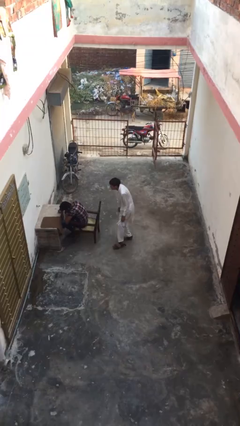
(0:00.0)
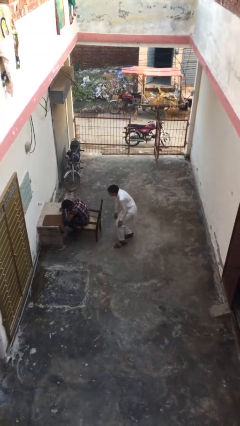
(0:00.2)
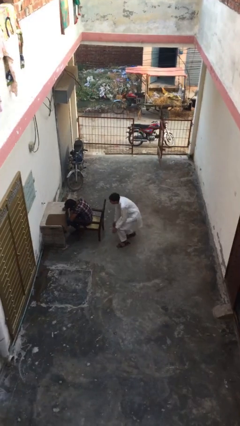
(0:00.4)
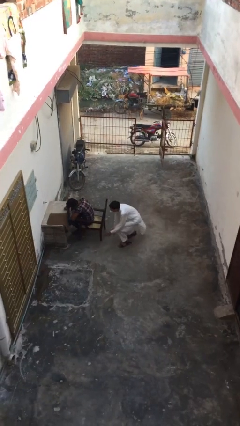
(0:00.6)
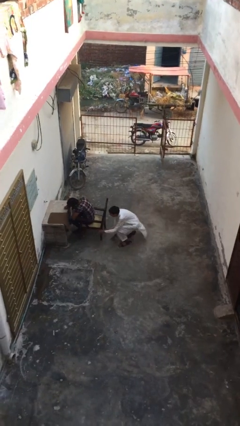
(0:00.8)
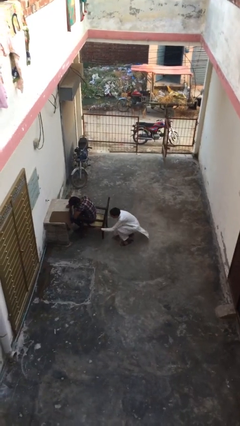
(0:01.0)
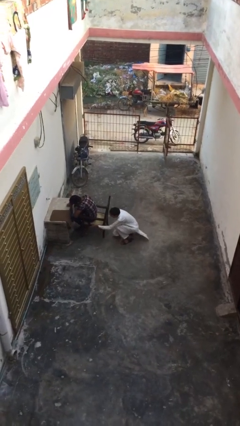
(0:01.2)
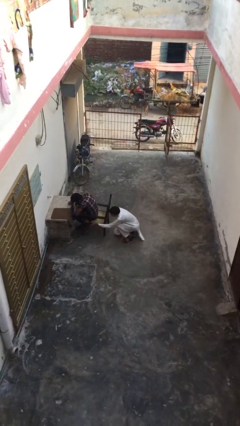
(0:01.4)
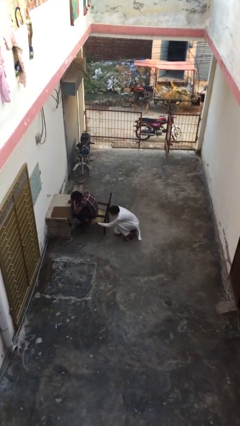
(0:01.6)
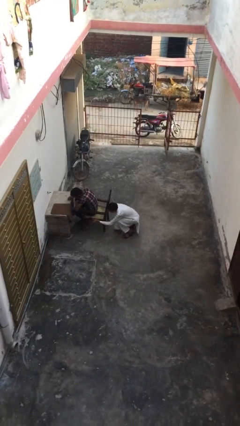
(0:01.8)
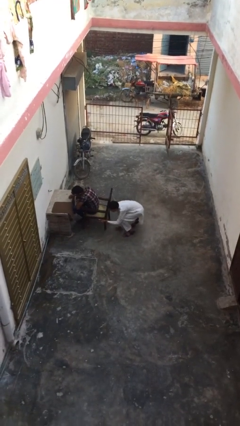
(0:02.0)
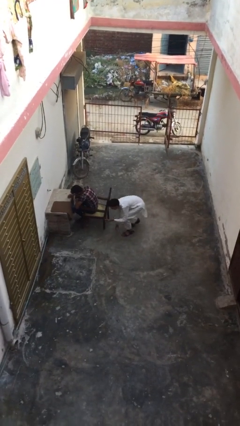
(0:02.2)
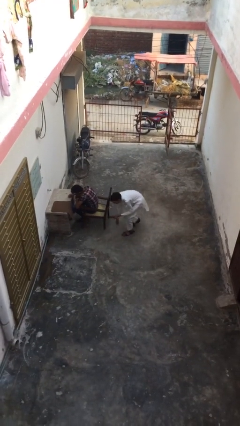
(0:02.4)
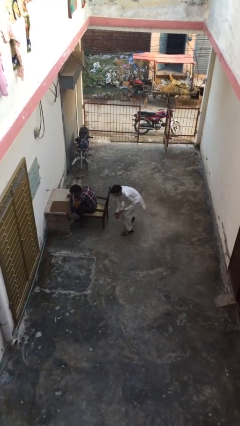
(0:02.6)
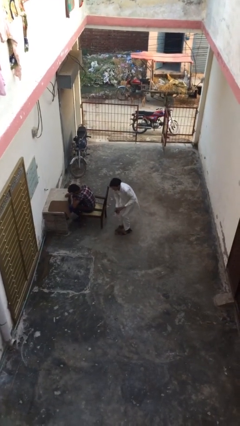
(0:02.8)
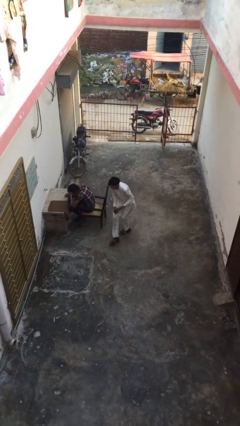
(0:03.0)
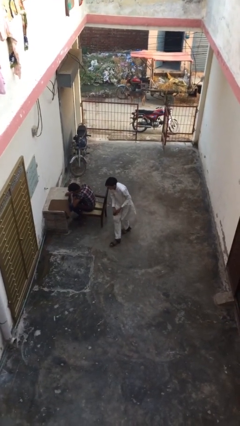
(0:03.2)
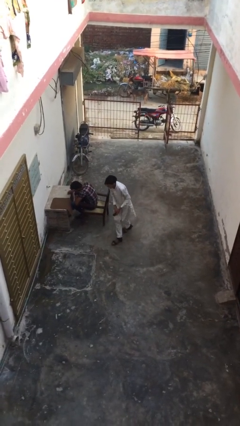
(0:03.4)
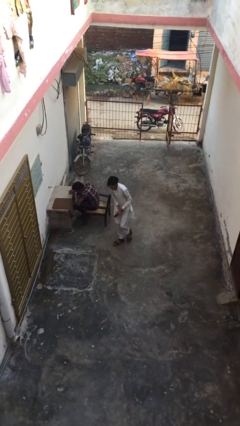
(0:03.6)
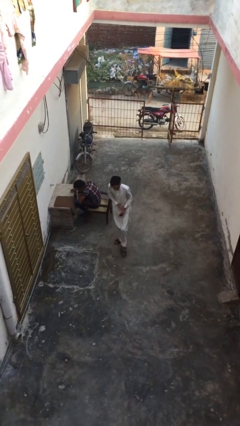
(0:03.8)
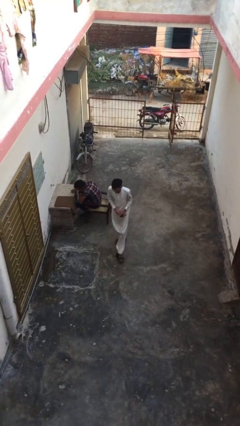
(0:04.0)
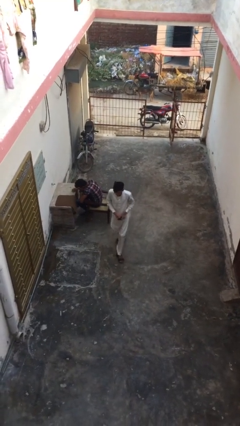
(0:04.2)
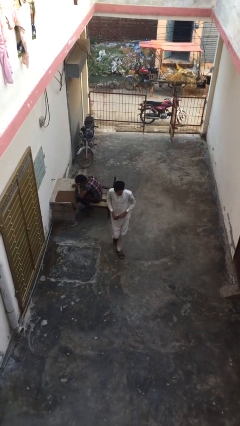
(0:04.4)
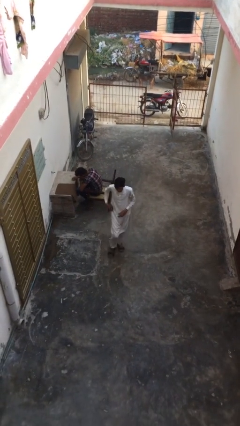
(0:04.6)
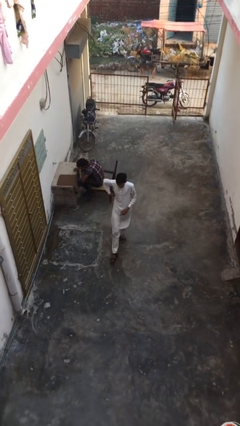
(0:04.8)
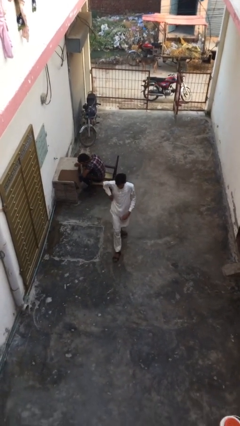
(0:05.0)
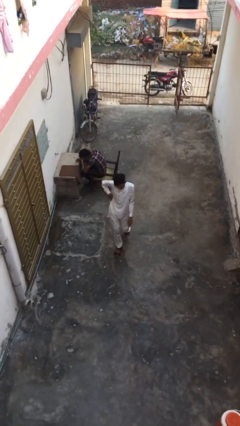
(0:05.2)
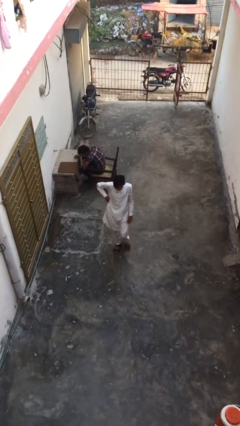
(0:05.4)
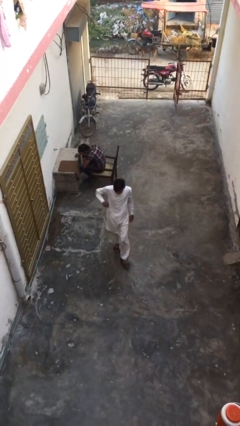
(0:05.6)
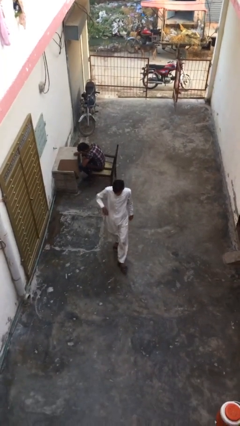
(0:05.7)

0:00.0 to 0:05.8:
person steals object from person

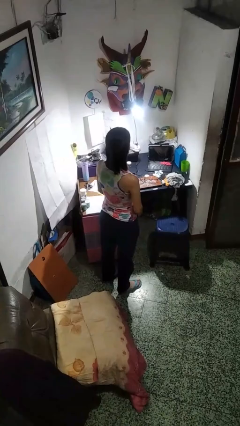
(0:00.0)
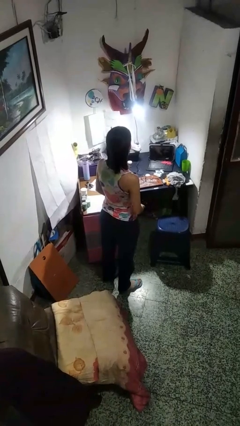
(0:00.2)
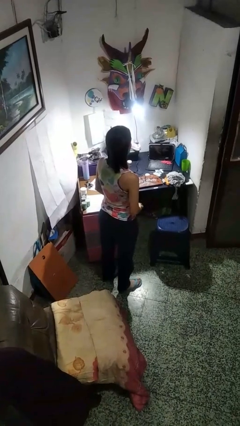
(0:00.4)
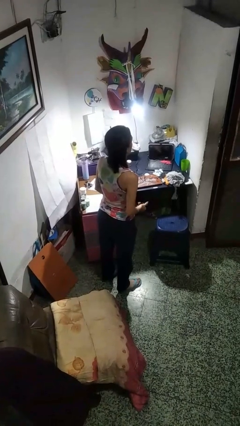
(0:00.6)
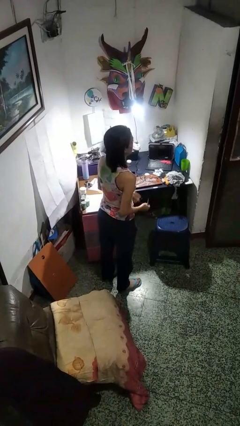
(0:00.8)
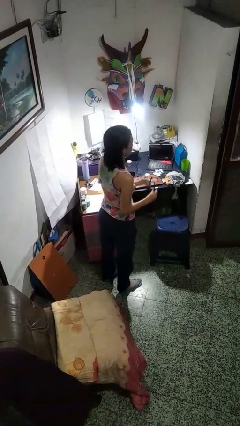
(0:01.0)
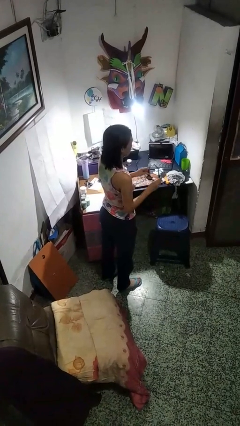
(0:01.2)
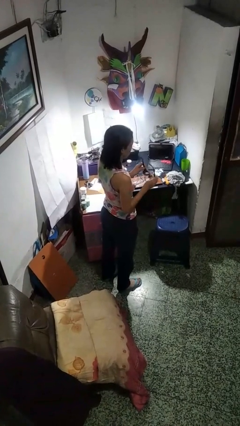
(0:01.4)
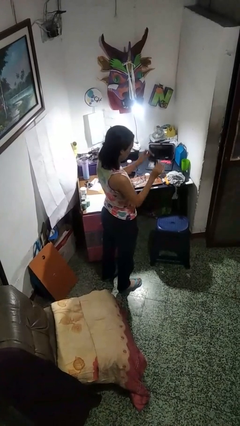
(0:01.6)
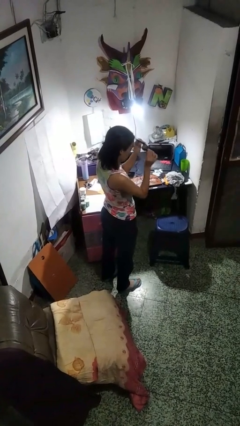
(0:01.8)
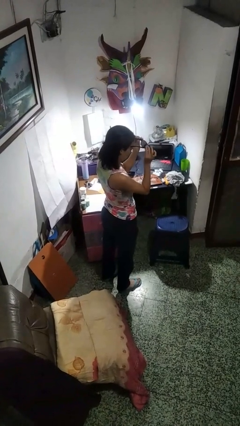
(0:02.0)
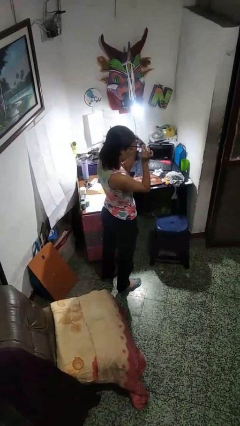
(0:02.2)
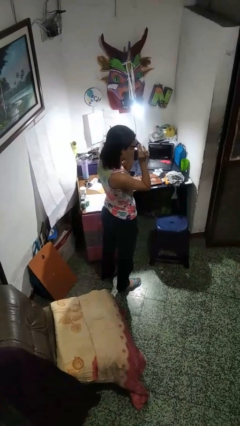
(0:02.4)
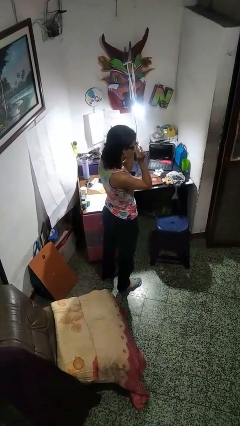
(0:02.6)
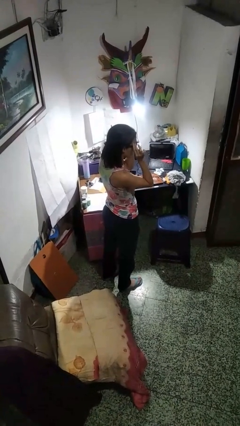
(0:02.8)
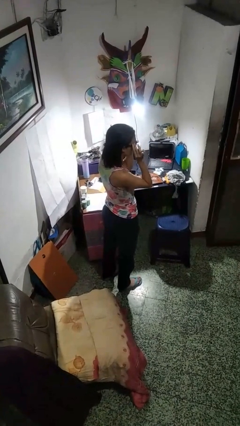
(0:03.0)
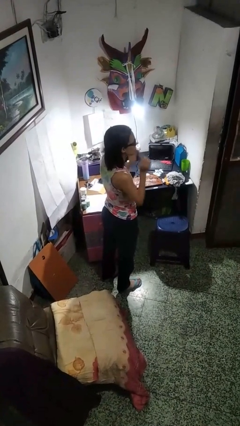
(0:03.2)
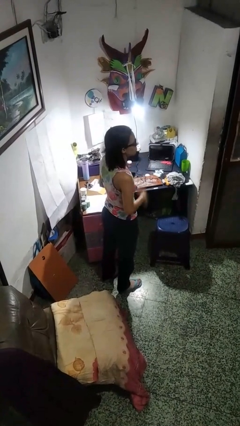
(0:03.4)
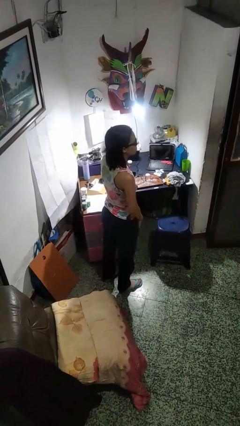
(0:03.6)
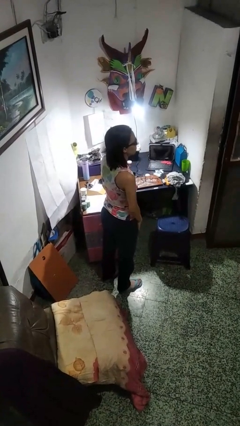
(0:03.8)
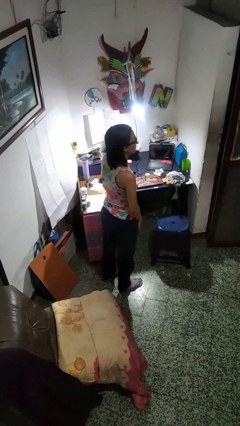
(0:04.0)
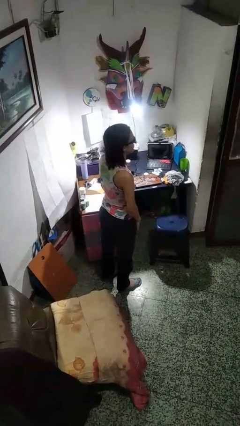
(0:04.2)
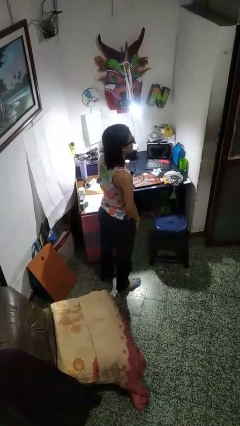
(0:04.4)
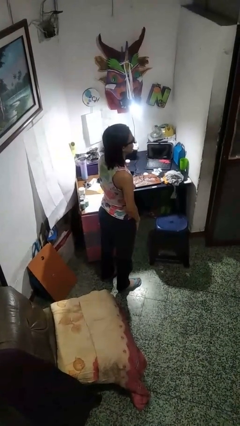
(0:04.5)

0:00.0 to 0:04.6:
person puts on sunglasses

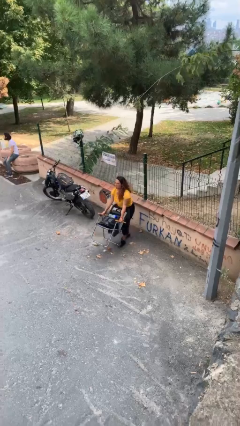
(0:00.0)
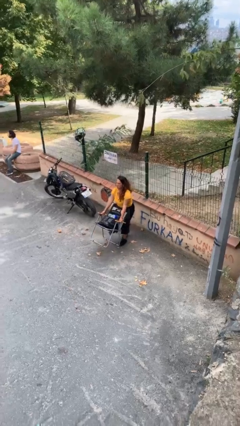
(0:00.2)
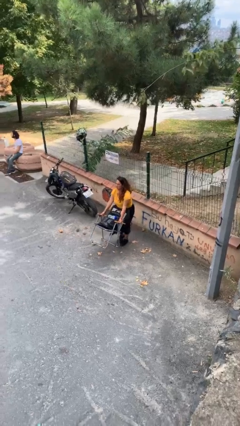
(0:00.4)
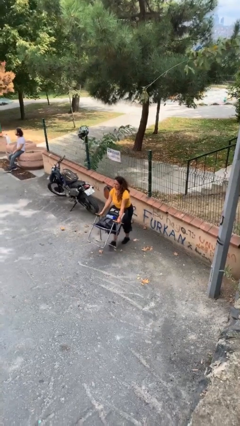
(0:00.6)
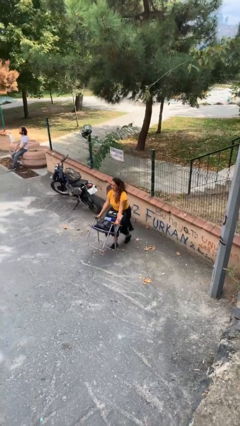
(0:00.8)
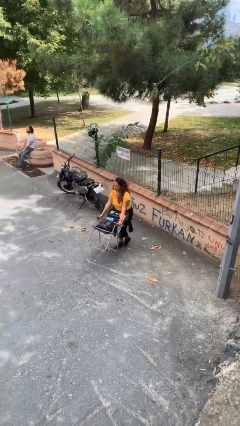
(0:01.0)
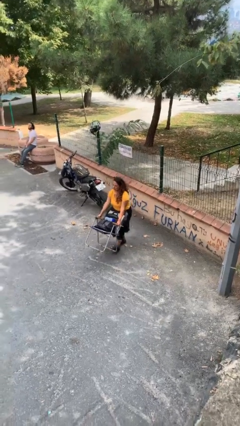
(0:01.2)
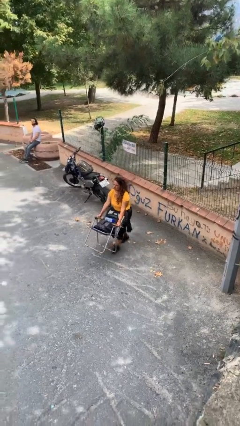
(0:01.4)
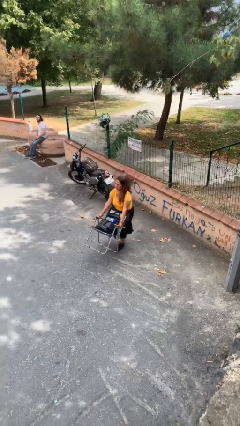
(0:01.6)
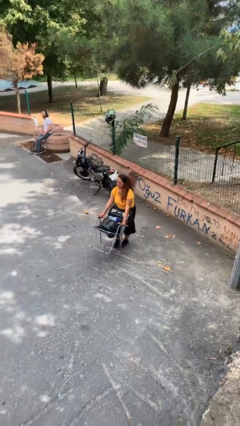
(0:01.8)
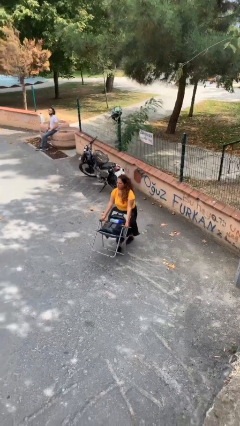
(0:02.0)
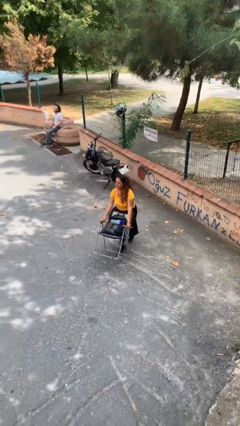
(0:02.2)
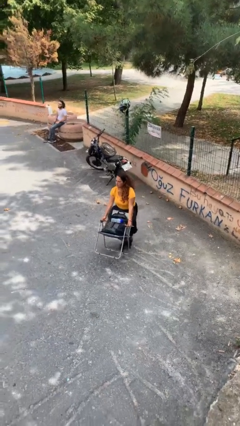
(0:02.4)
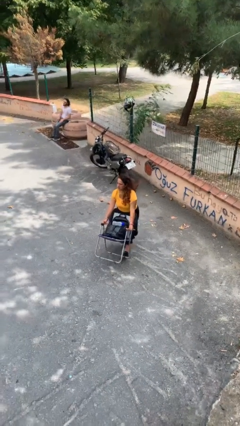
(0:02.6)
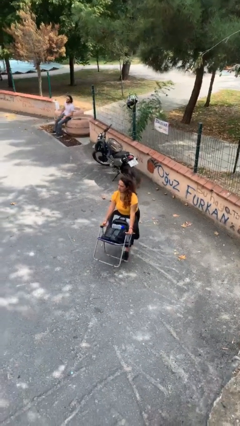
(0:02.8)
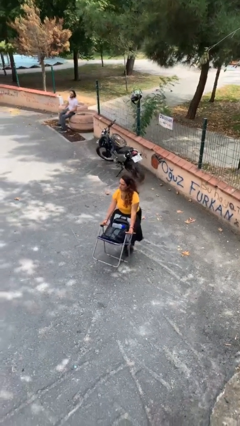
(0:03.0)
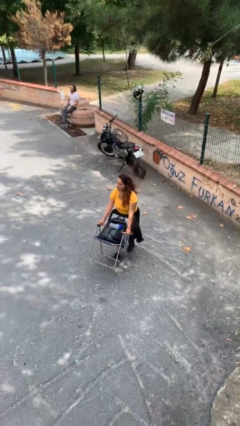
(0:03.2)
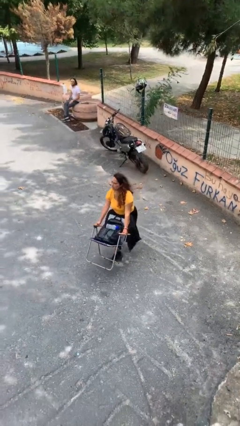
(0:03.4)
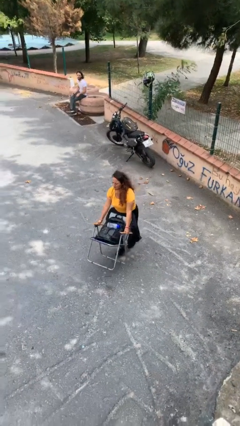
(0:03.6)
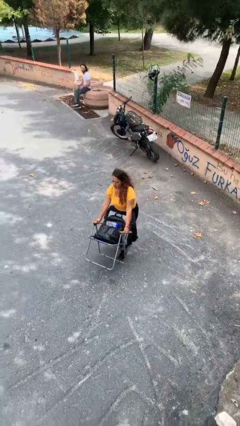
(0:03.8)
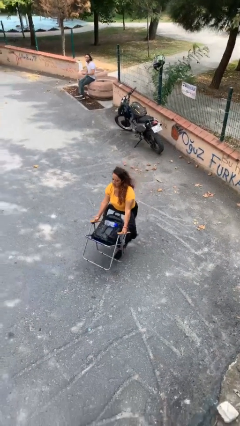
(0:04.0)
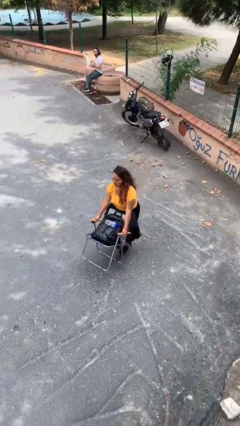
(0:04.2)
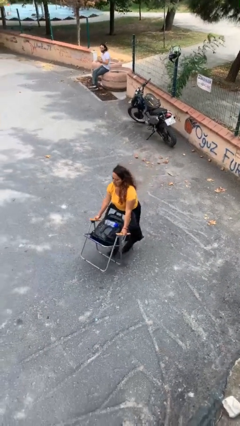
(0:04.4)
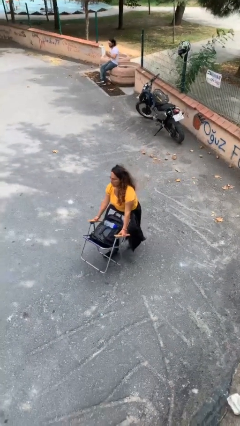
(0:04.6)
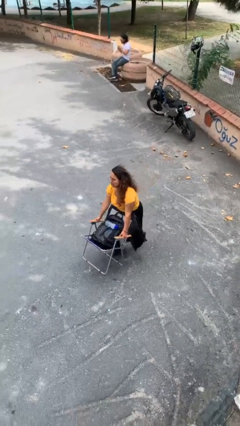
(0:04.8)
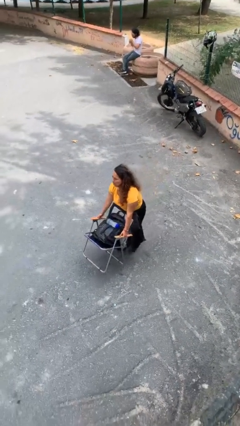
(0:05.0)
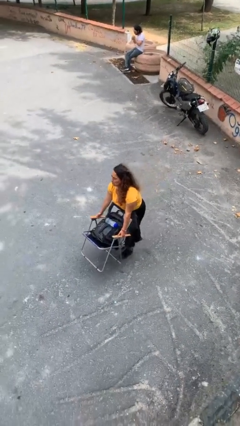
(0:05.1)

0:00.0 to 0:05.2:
person carries heavy object

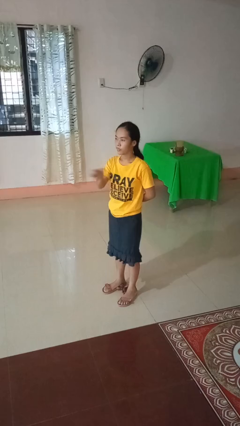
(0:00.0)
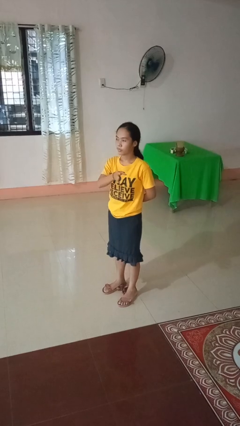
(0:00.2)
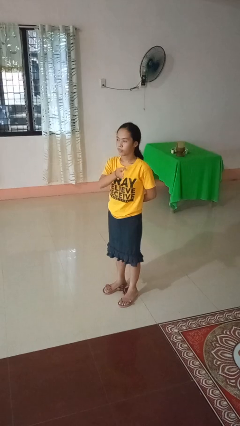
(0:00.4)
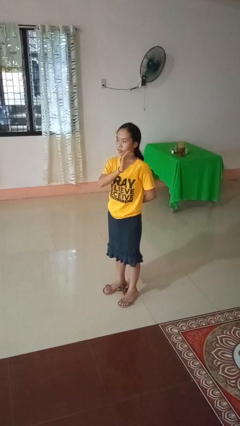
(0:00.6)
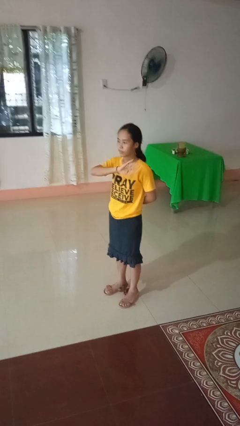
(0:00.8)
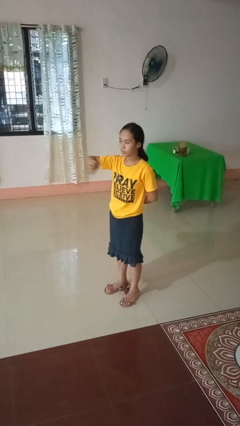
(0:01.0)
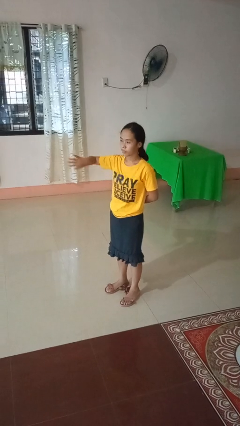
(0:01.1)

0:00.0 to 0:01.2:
person gestures swipe left

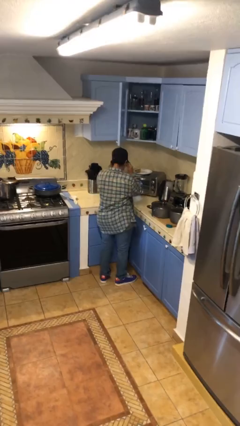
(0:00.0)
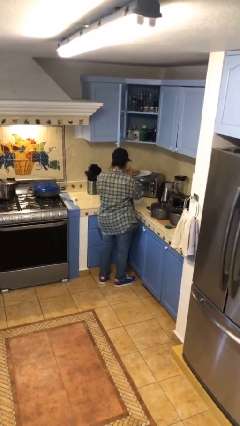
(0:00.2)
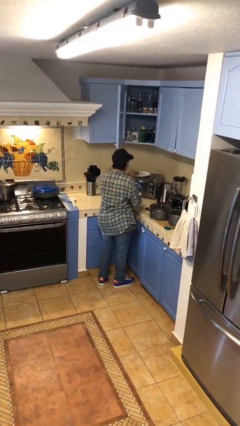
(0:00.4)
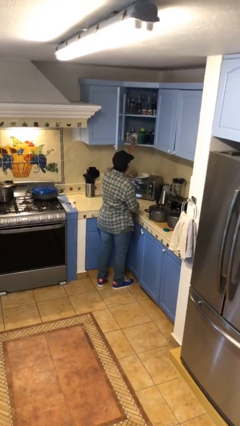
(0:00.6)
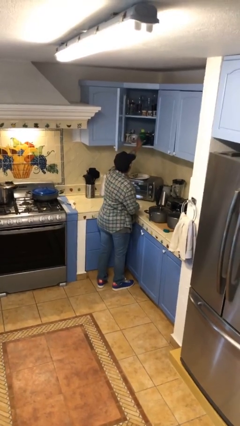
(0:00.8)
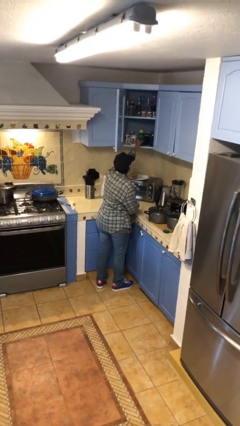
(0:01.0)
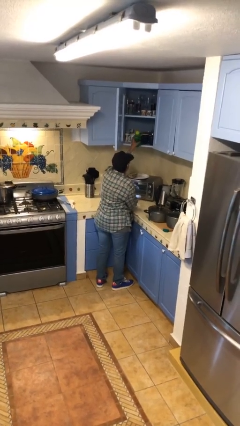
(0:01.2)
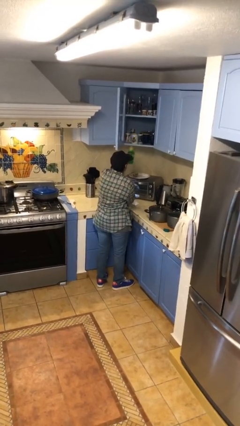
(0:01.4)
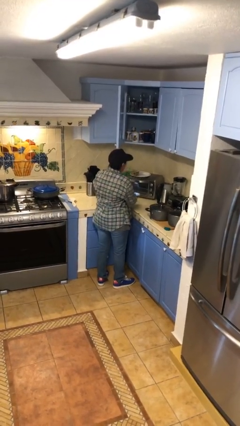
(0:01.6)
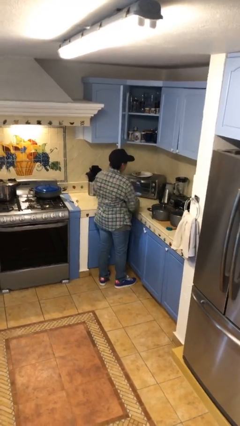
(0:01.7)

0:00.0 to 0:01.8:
person picks up object from cabinet
